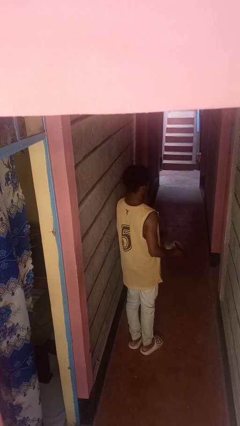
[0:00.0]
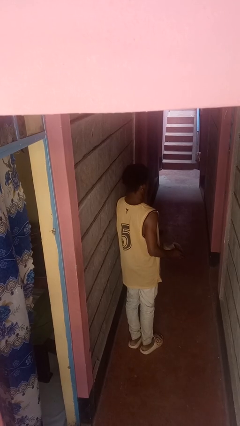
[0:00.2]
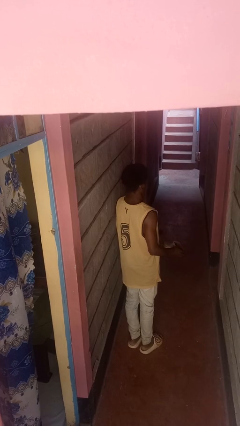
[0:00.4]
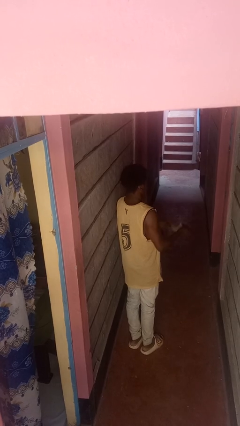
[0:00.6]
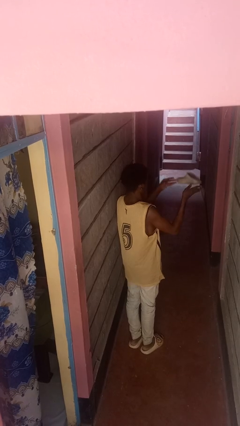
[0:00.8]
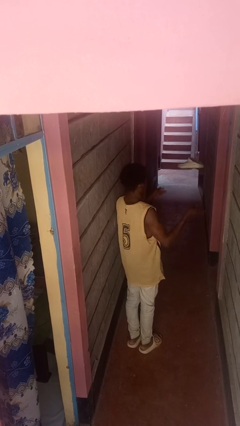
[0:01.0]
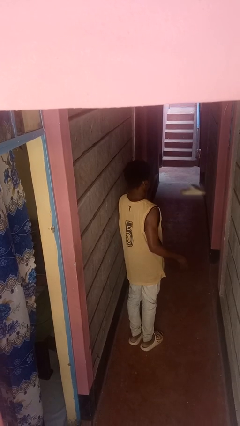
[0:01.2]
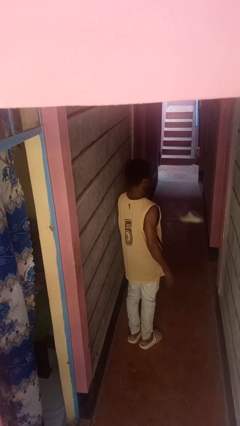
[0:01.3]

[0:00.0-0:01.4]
person throws object into air

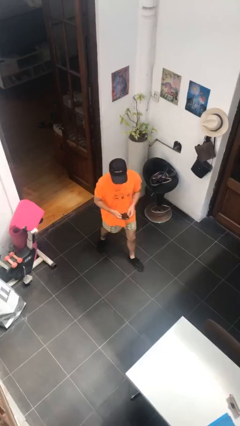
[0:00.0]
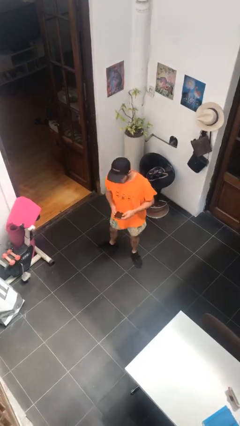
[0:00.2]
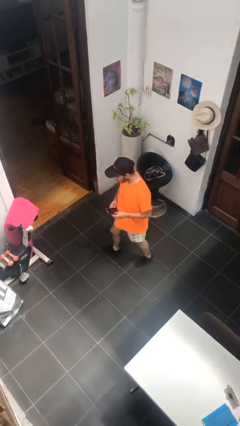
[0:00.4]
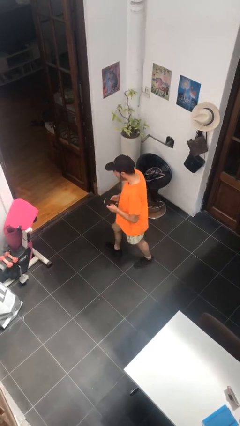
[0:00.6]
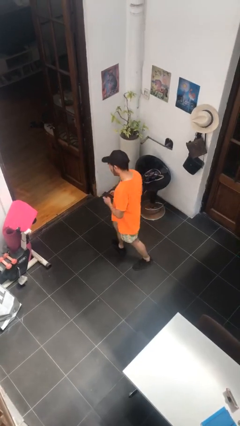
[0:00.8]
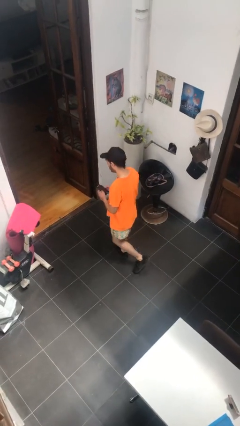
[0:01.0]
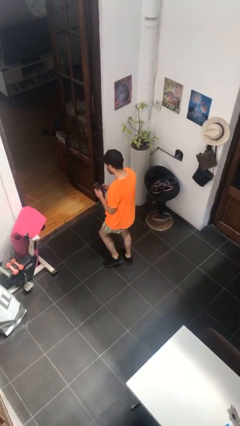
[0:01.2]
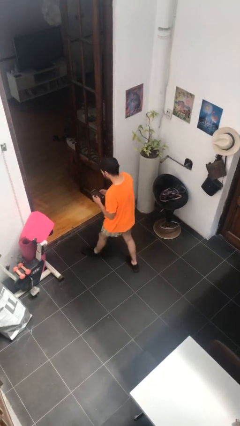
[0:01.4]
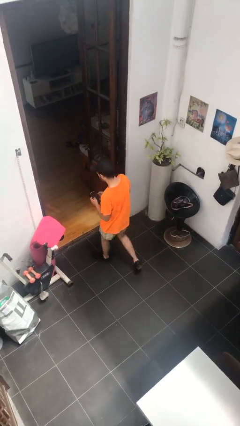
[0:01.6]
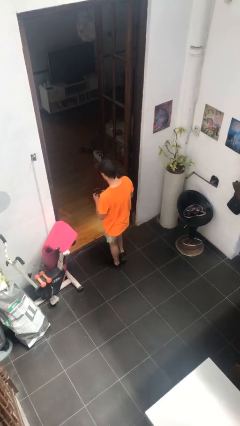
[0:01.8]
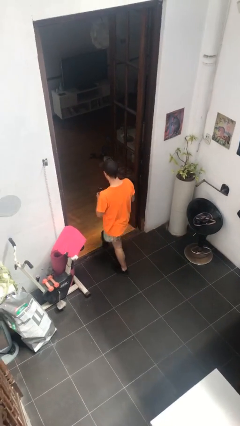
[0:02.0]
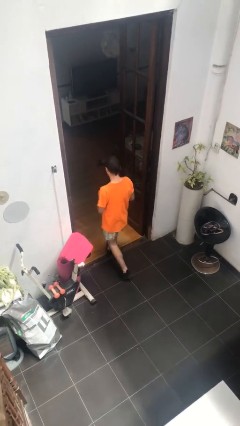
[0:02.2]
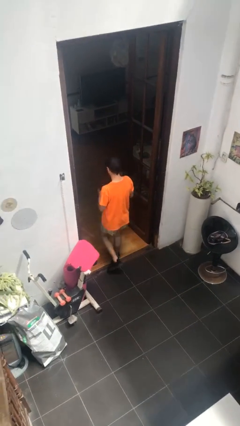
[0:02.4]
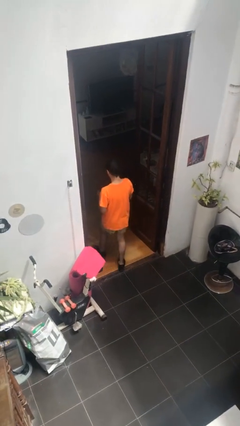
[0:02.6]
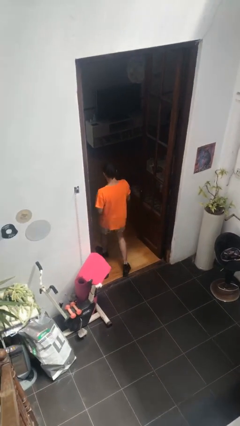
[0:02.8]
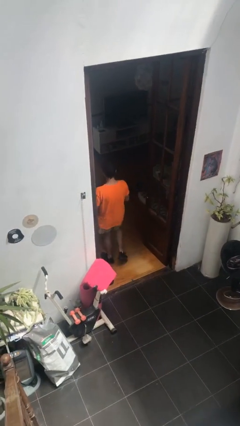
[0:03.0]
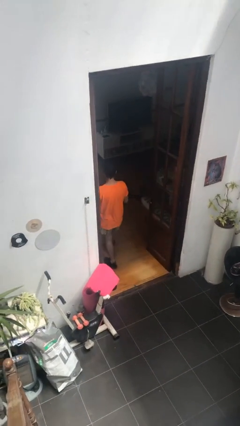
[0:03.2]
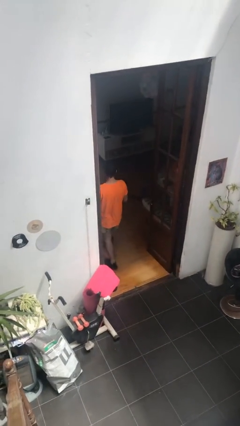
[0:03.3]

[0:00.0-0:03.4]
person exits scene through structure

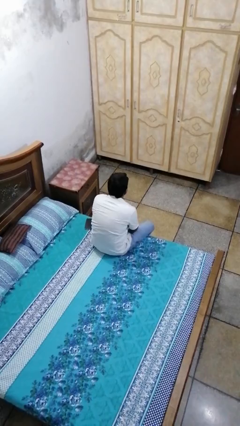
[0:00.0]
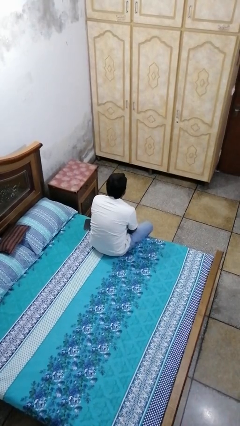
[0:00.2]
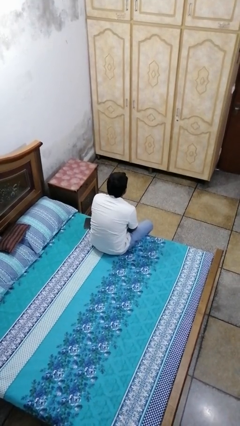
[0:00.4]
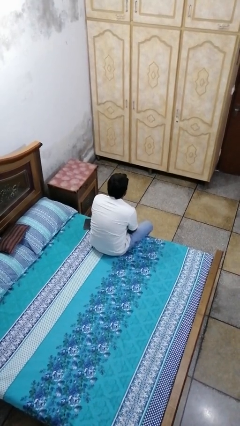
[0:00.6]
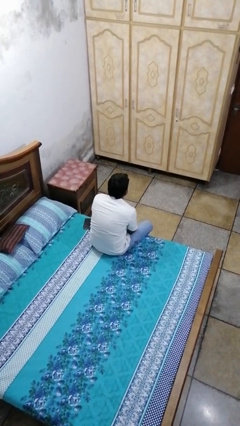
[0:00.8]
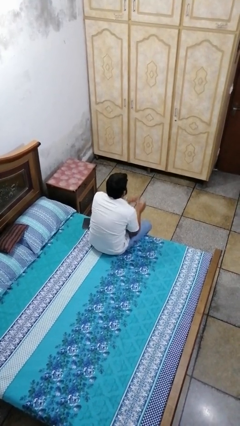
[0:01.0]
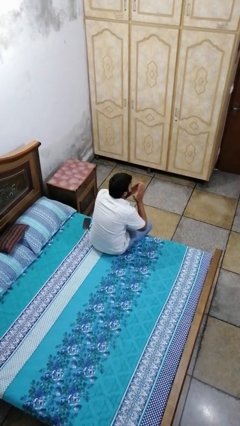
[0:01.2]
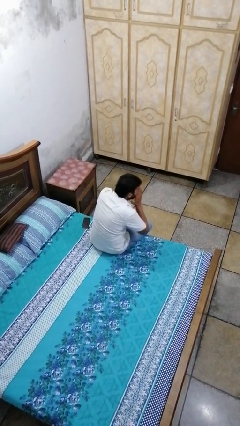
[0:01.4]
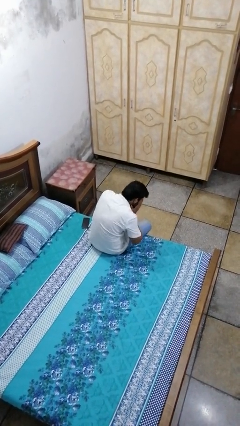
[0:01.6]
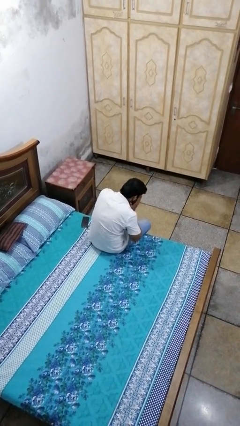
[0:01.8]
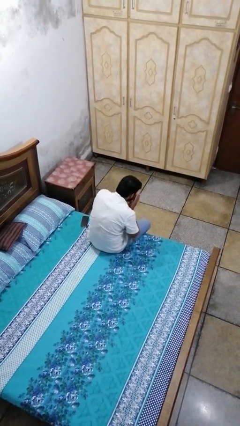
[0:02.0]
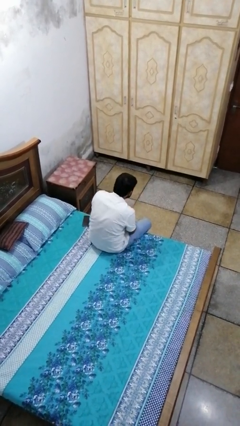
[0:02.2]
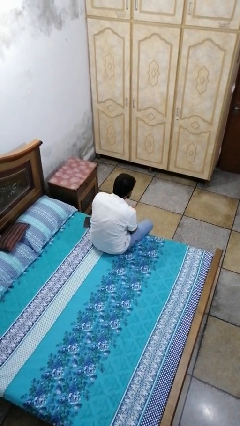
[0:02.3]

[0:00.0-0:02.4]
person sneezes into hand

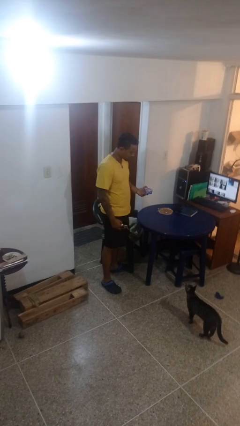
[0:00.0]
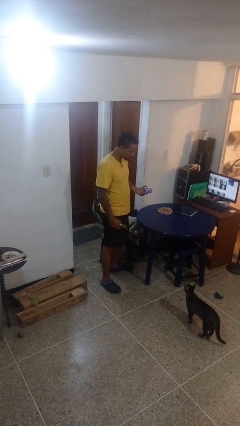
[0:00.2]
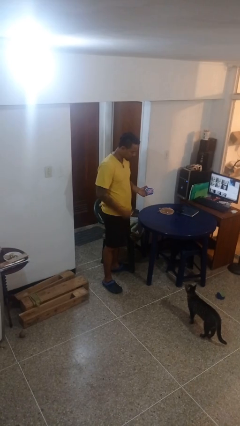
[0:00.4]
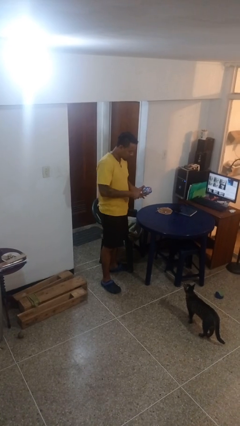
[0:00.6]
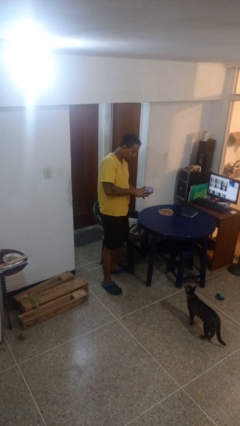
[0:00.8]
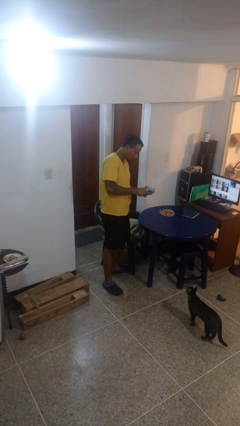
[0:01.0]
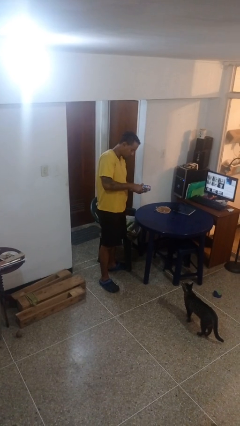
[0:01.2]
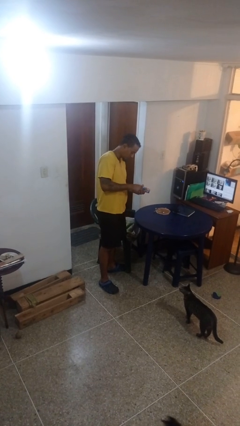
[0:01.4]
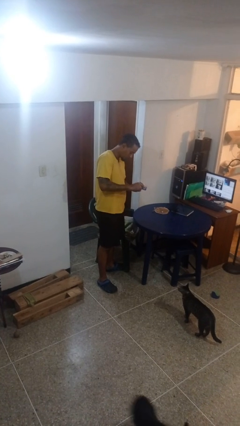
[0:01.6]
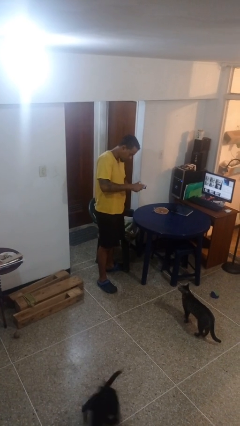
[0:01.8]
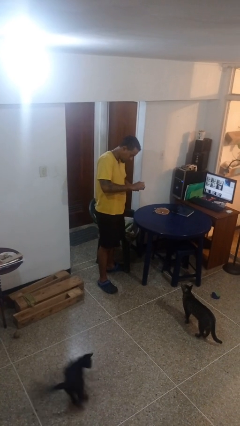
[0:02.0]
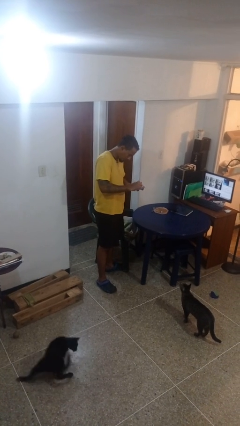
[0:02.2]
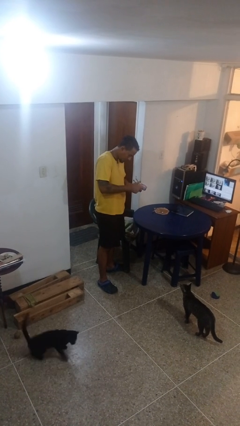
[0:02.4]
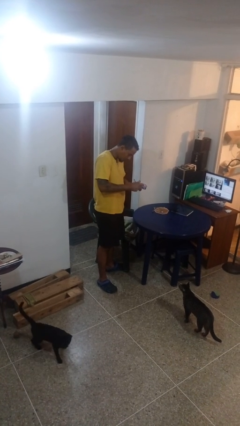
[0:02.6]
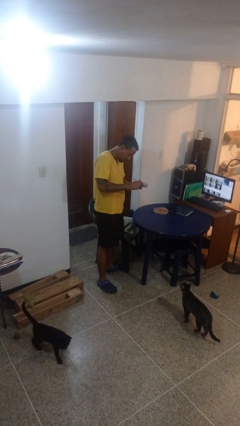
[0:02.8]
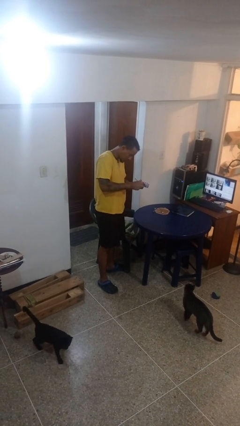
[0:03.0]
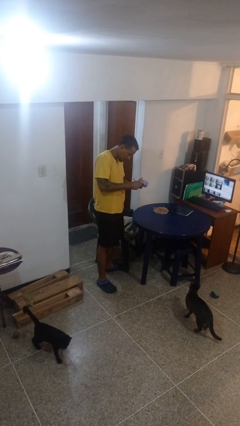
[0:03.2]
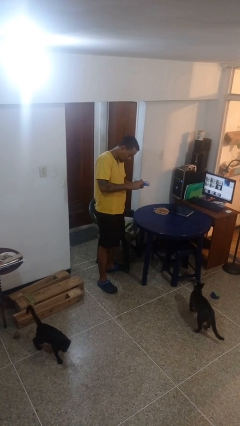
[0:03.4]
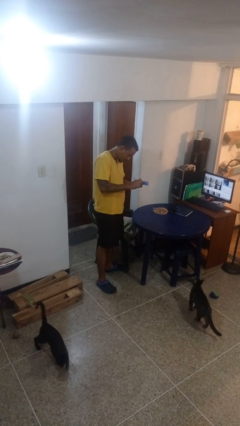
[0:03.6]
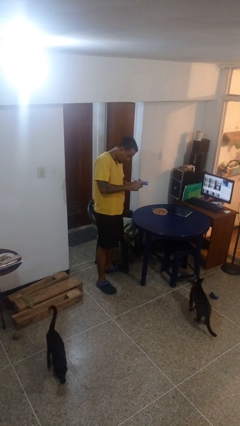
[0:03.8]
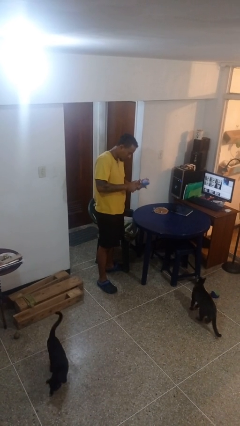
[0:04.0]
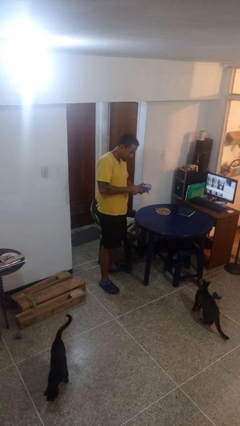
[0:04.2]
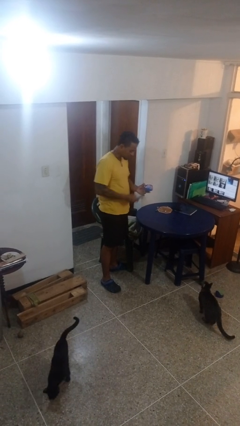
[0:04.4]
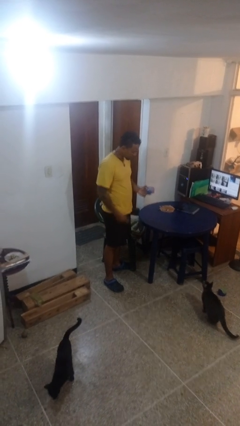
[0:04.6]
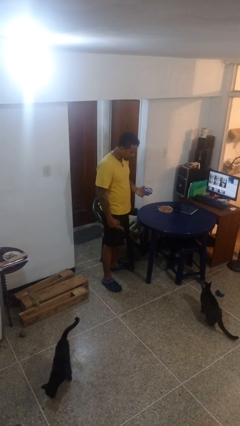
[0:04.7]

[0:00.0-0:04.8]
person opens can with can opener

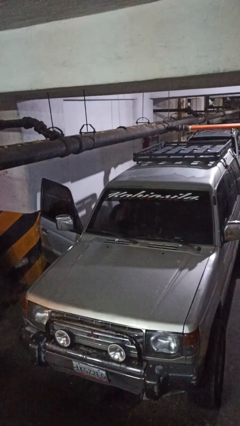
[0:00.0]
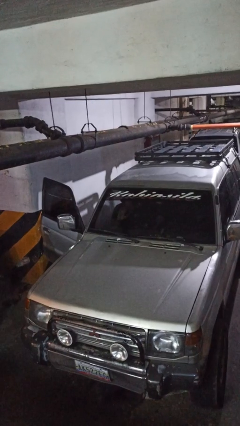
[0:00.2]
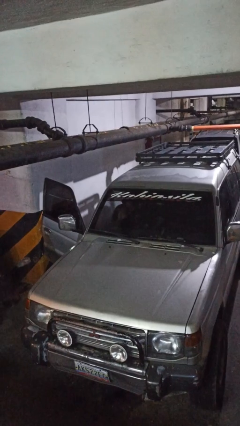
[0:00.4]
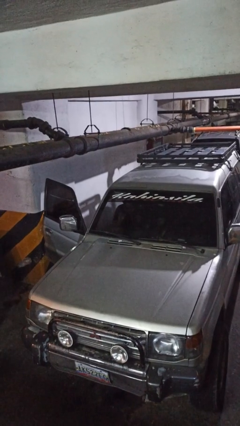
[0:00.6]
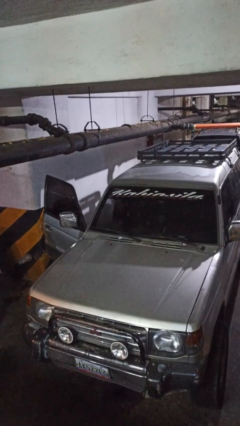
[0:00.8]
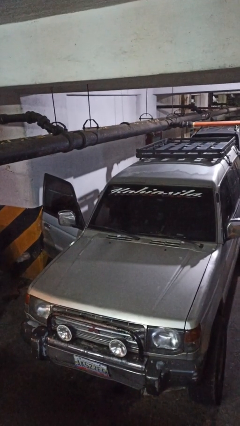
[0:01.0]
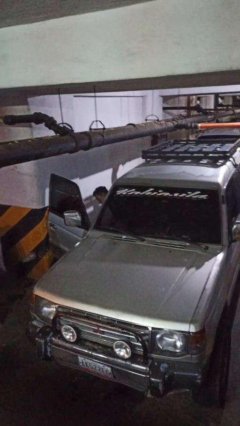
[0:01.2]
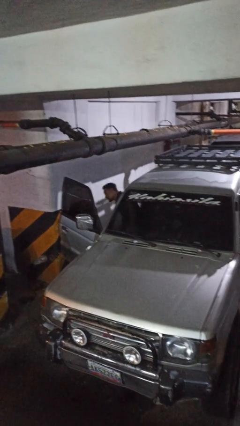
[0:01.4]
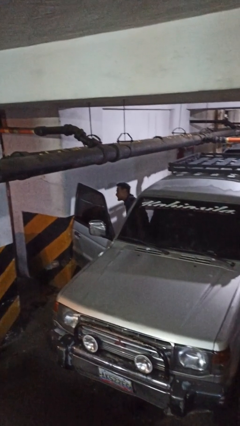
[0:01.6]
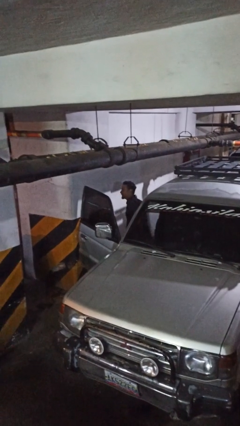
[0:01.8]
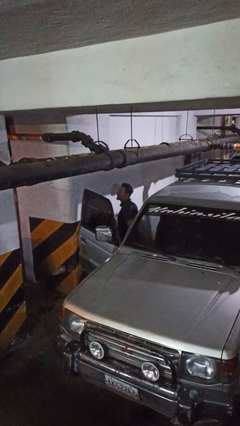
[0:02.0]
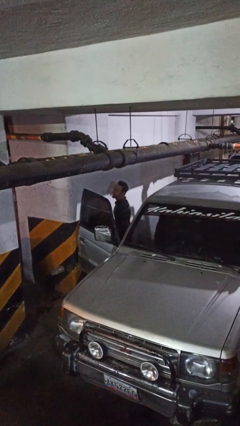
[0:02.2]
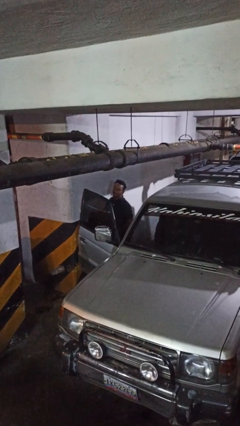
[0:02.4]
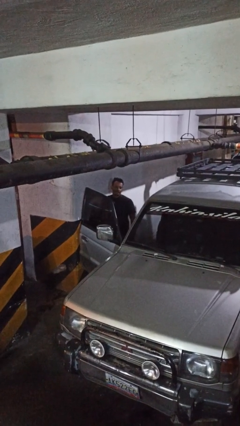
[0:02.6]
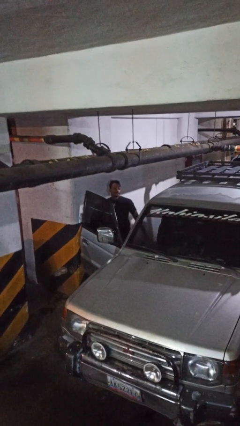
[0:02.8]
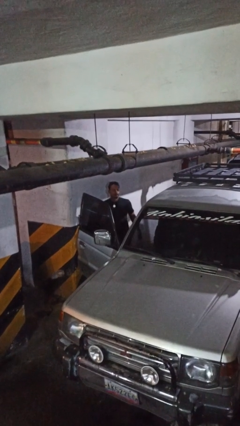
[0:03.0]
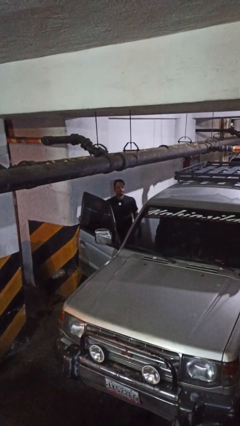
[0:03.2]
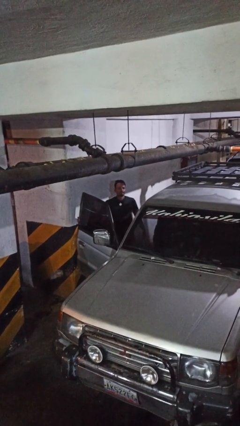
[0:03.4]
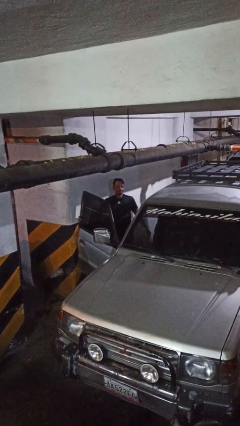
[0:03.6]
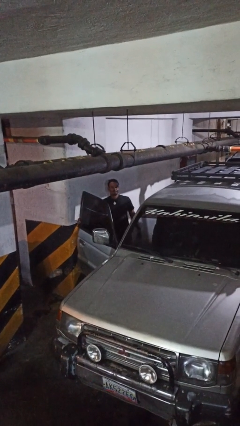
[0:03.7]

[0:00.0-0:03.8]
person exits car

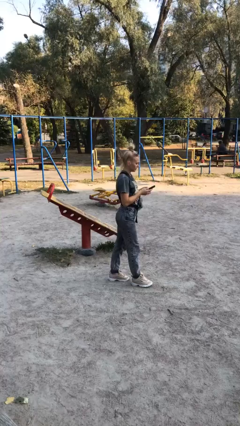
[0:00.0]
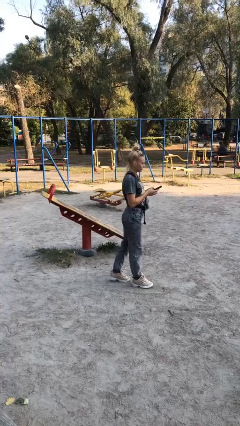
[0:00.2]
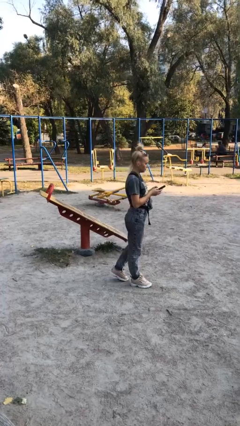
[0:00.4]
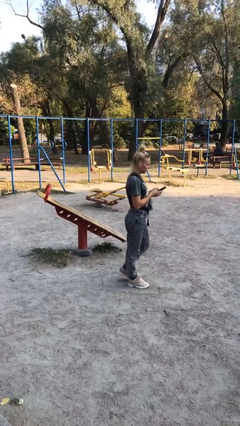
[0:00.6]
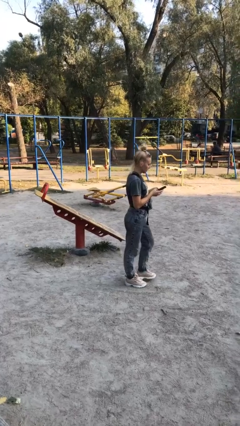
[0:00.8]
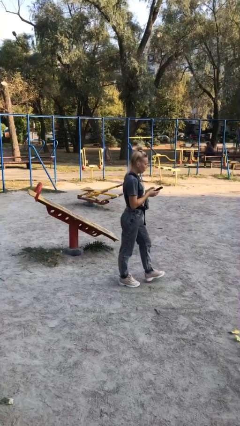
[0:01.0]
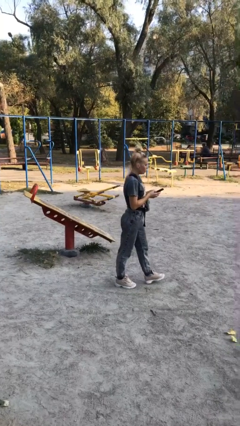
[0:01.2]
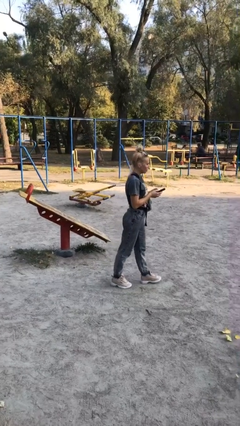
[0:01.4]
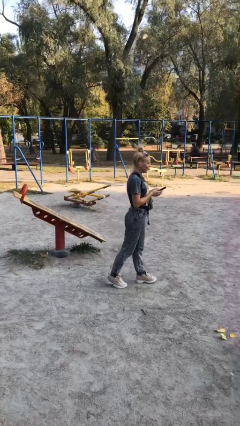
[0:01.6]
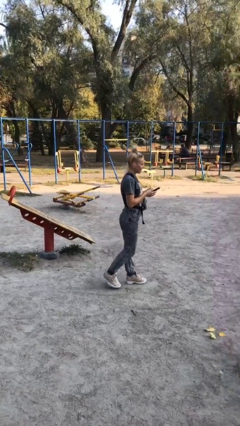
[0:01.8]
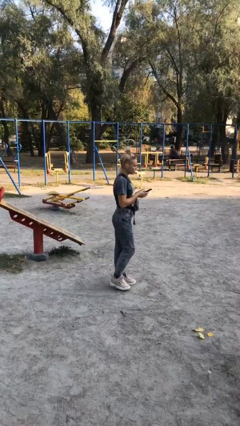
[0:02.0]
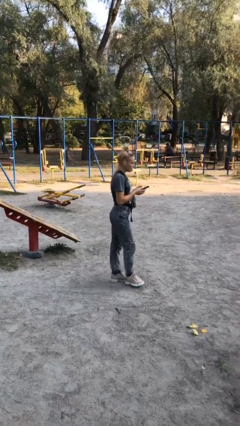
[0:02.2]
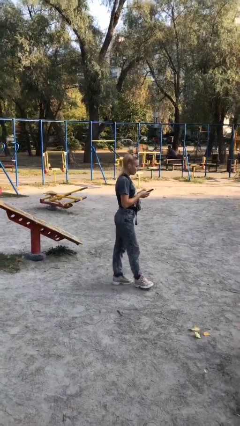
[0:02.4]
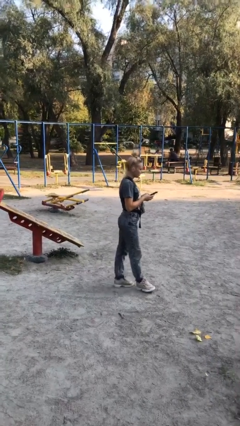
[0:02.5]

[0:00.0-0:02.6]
person texts on phone
